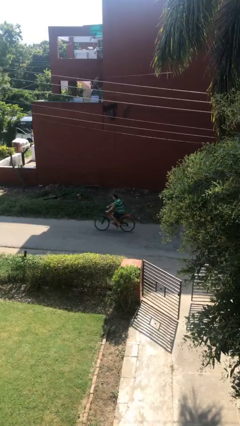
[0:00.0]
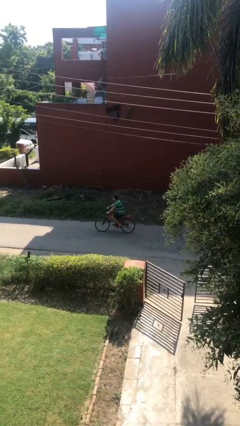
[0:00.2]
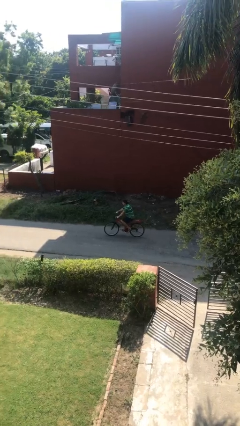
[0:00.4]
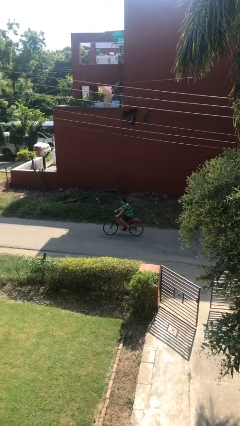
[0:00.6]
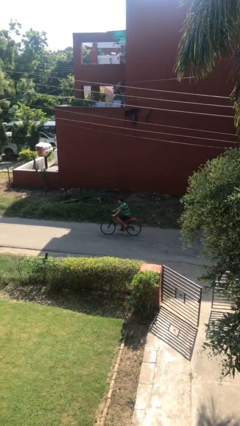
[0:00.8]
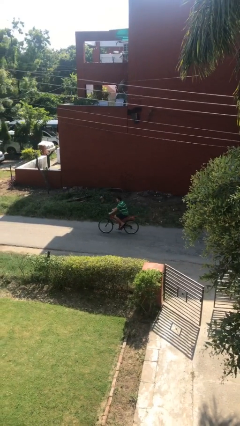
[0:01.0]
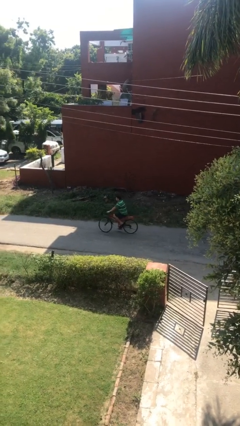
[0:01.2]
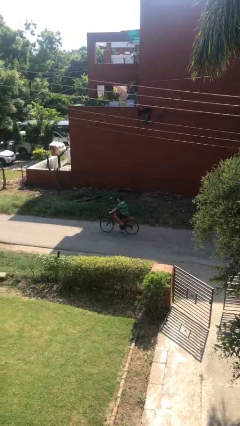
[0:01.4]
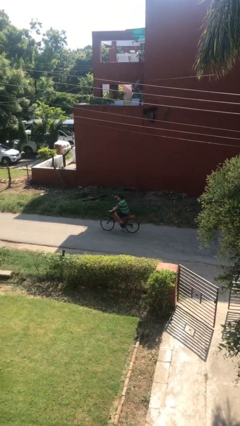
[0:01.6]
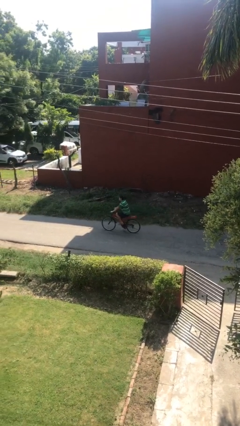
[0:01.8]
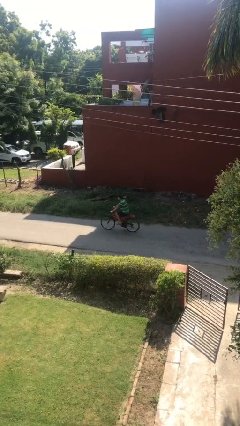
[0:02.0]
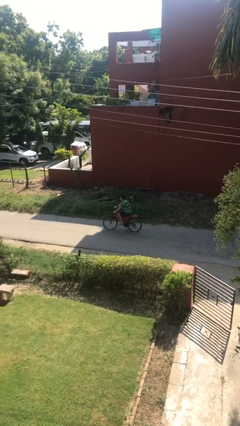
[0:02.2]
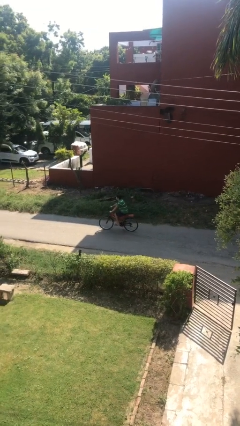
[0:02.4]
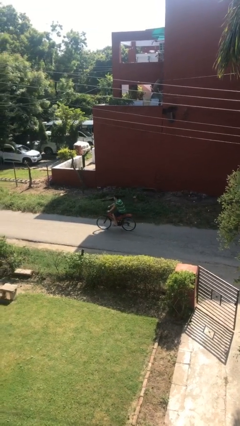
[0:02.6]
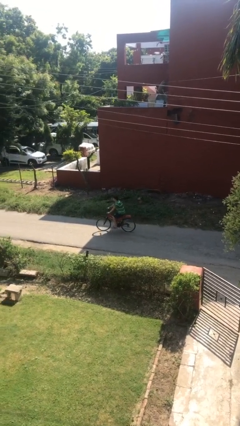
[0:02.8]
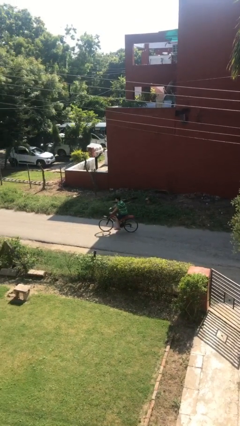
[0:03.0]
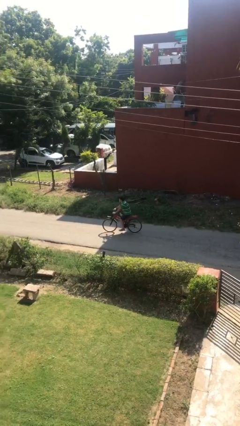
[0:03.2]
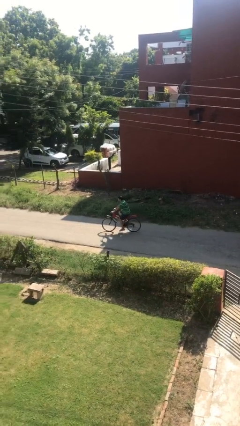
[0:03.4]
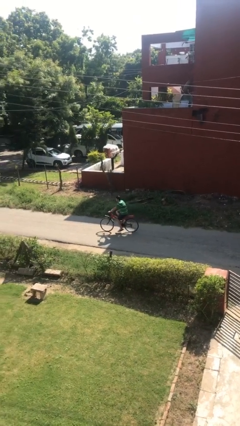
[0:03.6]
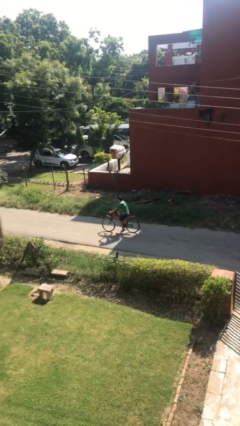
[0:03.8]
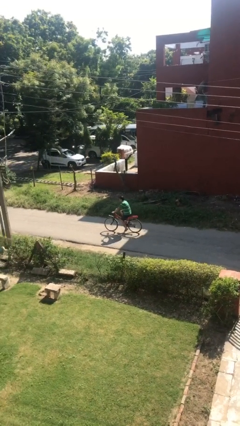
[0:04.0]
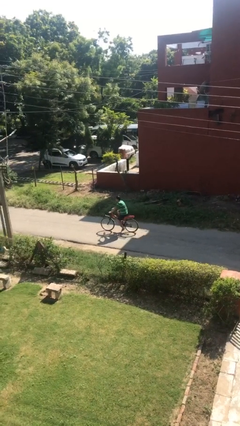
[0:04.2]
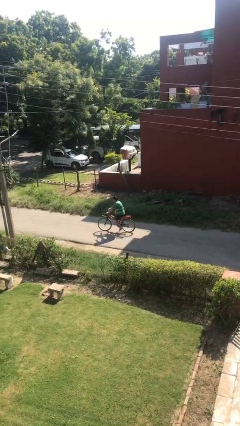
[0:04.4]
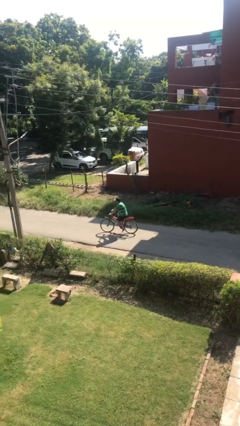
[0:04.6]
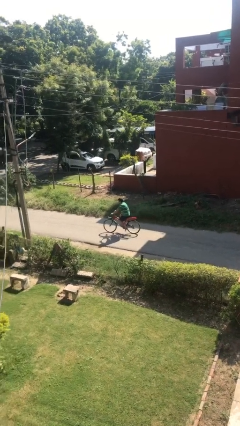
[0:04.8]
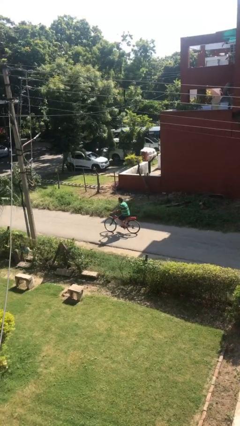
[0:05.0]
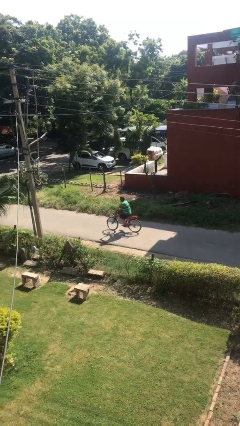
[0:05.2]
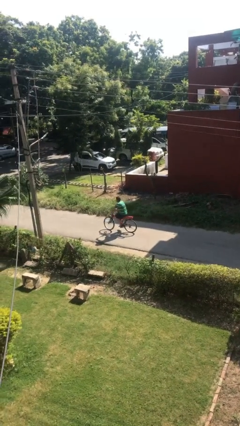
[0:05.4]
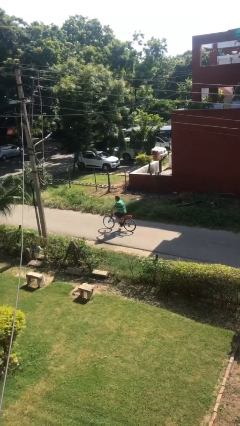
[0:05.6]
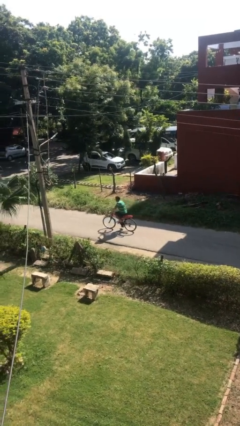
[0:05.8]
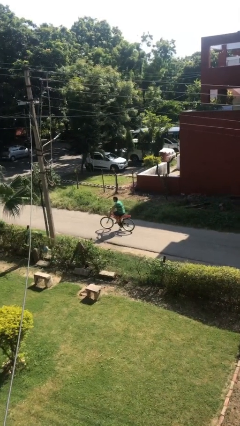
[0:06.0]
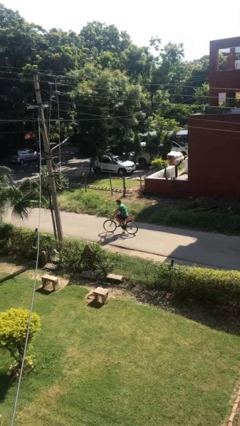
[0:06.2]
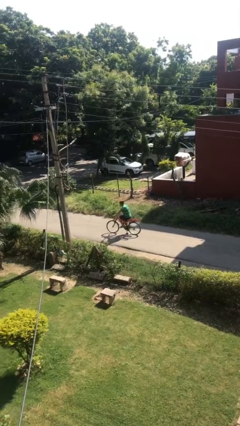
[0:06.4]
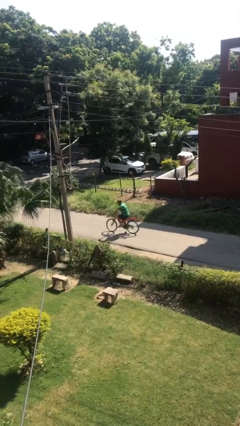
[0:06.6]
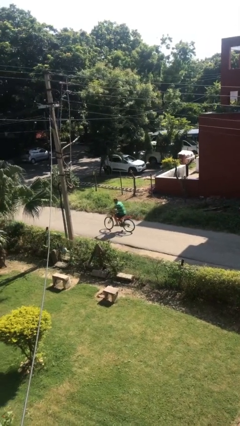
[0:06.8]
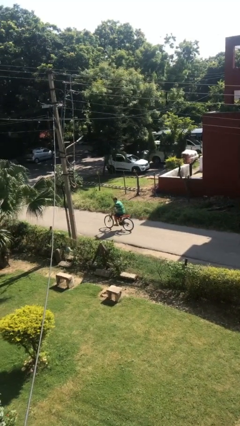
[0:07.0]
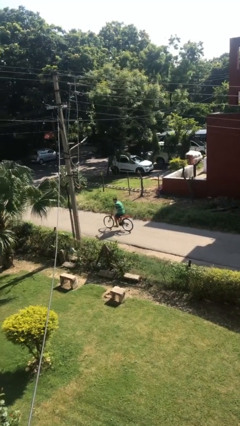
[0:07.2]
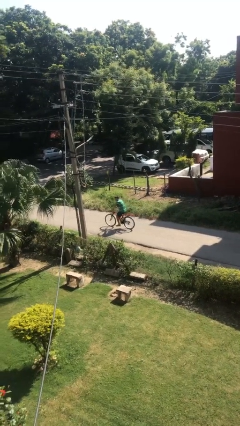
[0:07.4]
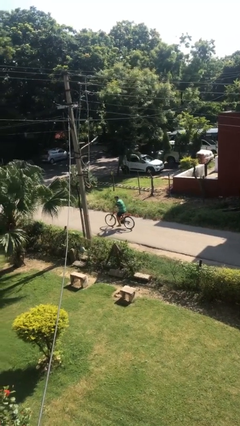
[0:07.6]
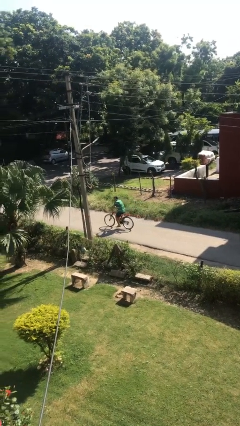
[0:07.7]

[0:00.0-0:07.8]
person rides bicycle

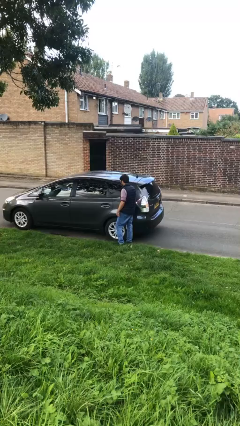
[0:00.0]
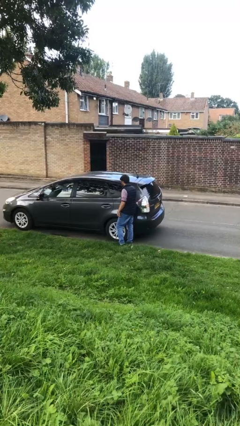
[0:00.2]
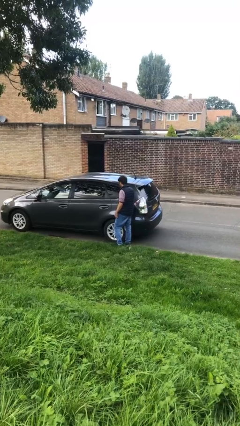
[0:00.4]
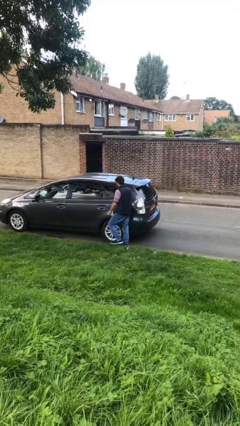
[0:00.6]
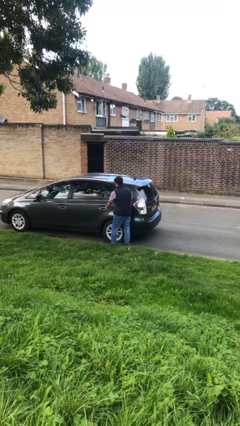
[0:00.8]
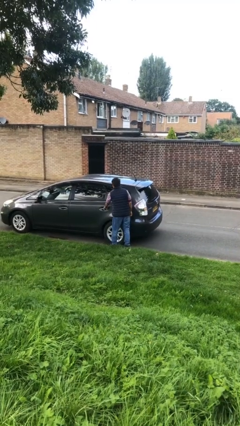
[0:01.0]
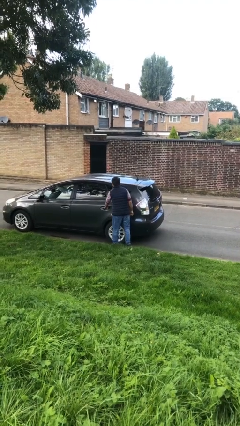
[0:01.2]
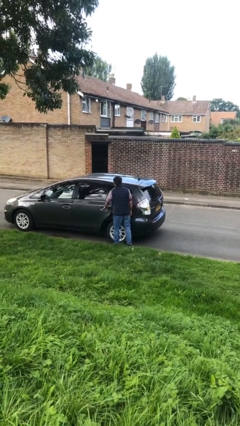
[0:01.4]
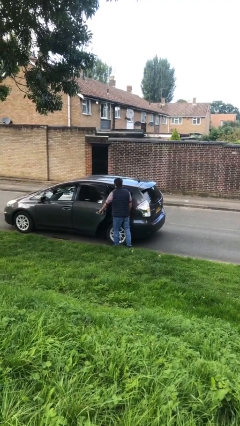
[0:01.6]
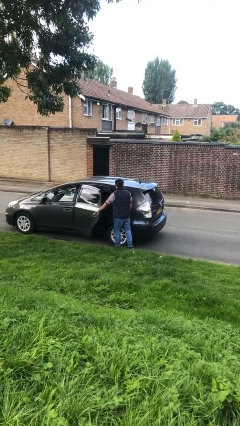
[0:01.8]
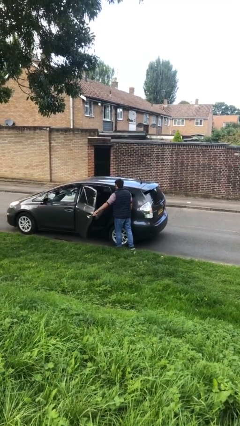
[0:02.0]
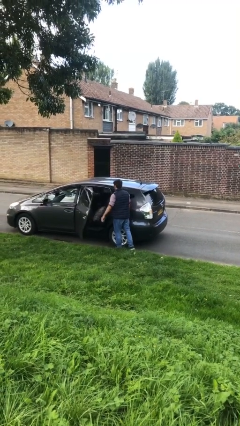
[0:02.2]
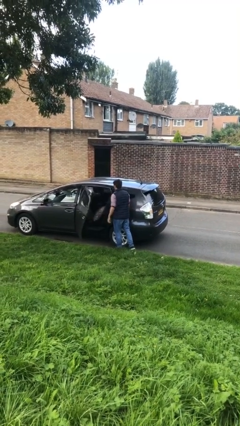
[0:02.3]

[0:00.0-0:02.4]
person opens car door

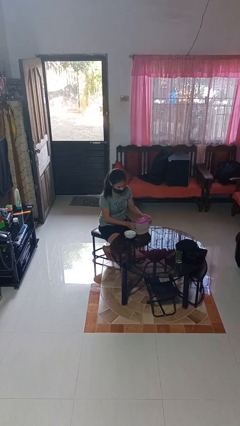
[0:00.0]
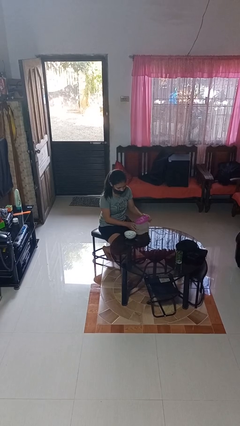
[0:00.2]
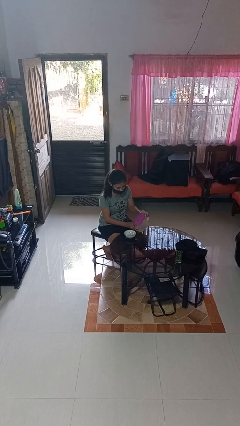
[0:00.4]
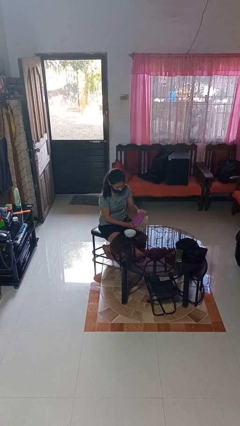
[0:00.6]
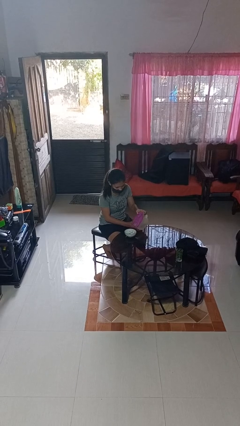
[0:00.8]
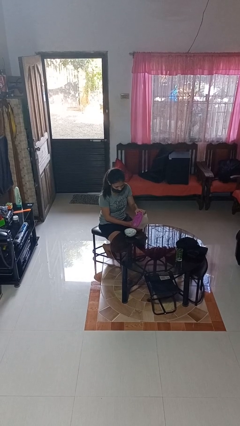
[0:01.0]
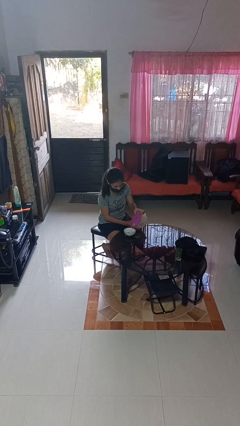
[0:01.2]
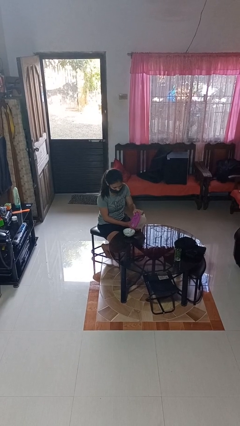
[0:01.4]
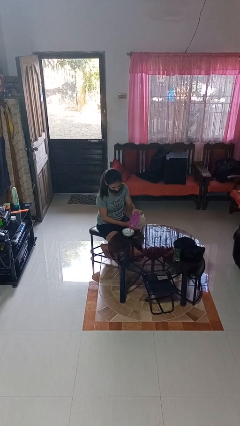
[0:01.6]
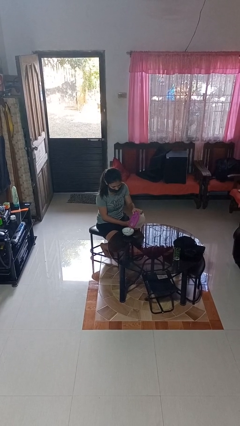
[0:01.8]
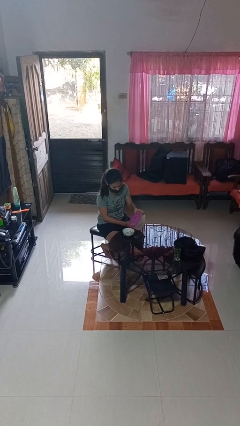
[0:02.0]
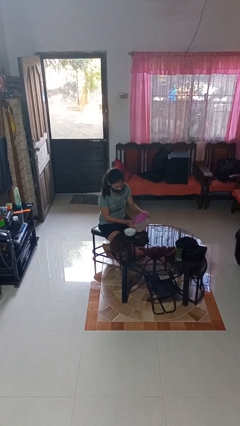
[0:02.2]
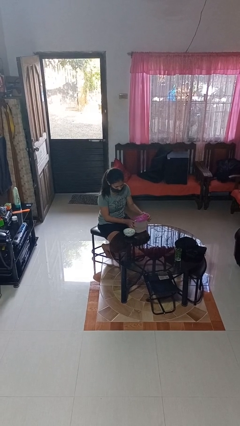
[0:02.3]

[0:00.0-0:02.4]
person pours into bowl

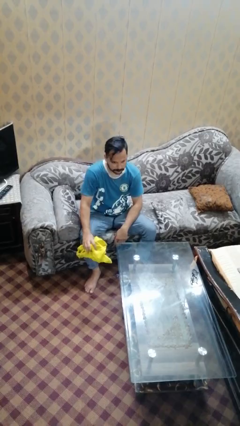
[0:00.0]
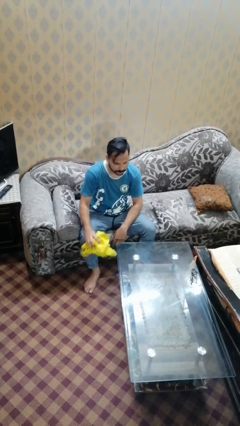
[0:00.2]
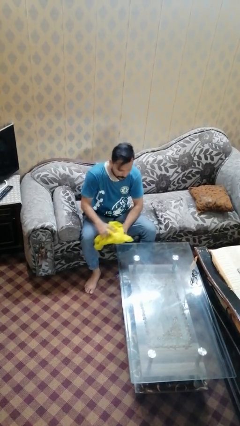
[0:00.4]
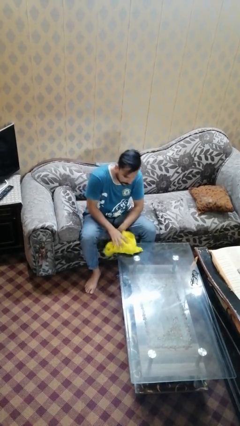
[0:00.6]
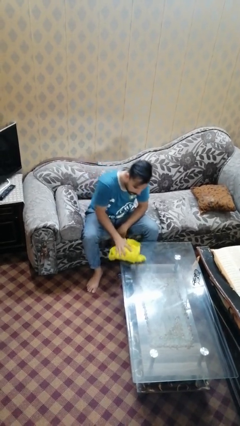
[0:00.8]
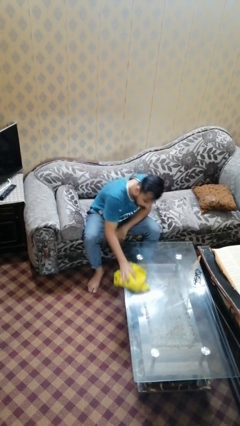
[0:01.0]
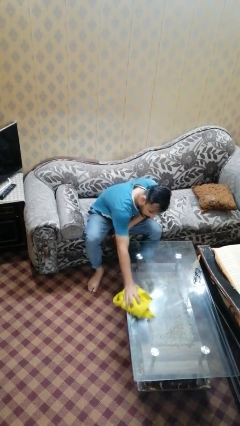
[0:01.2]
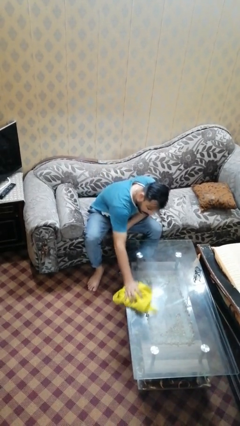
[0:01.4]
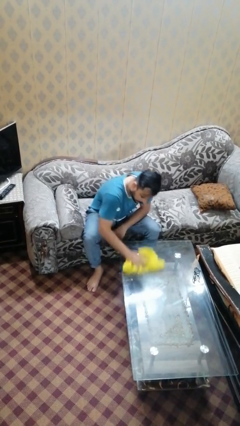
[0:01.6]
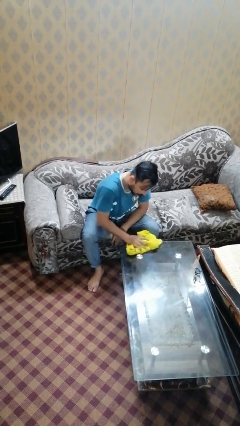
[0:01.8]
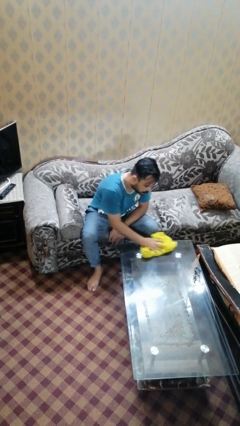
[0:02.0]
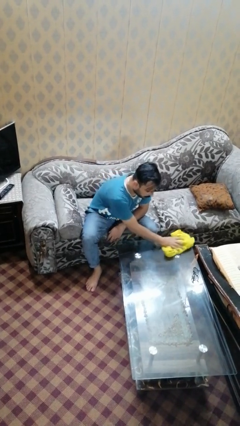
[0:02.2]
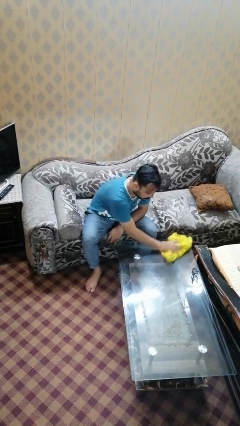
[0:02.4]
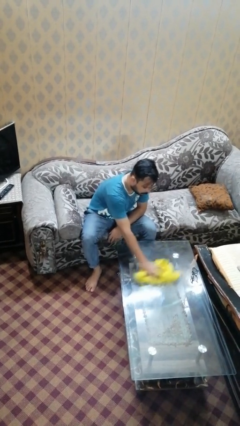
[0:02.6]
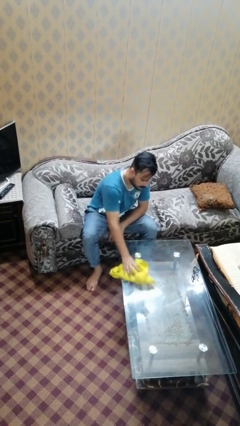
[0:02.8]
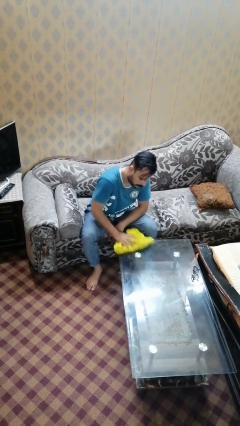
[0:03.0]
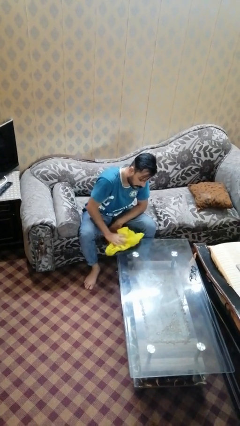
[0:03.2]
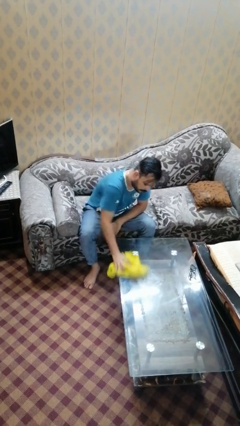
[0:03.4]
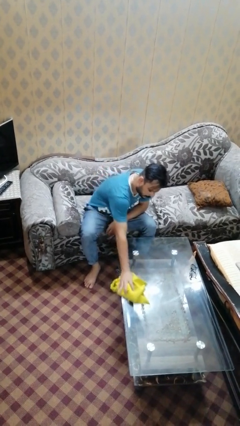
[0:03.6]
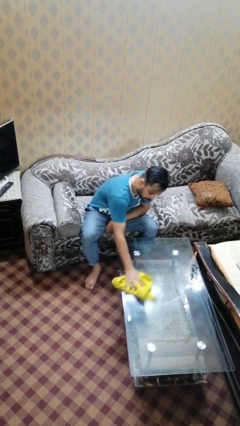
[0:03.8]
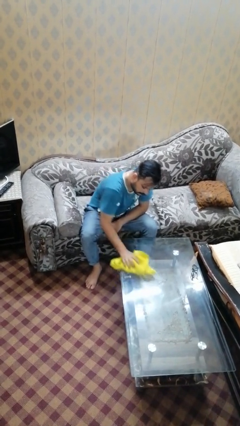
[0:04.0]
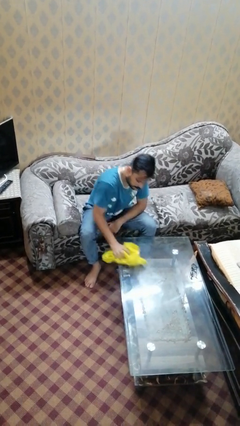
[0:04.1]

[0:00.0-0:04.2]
person cleans table with rag

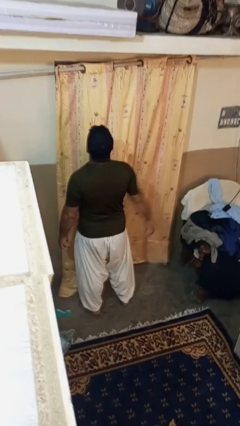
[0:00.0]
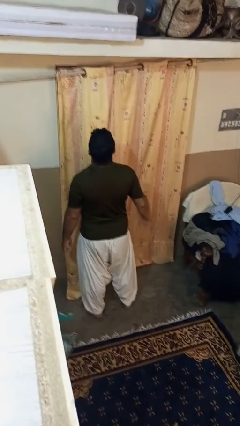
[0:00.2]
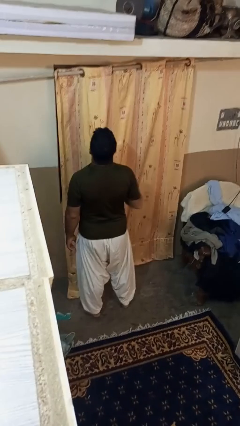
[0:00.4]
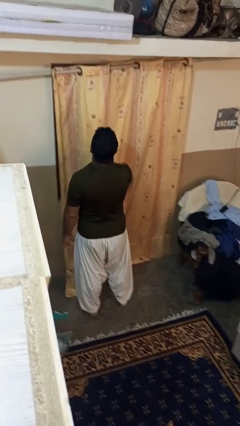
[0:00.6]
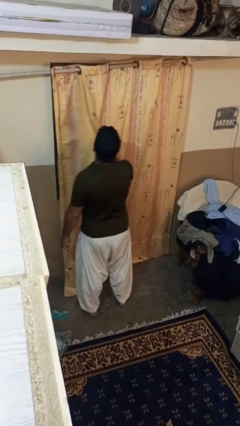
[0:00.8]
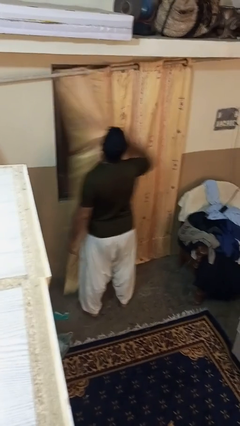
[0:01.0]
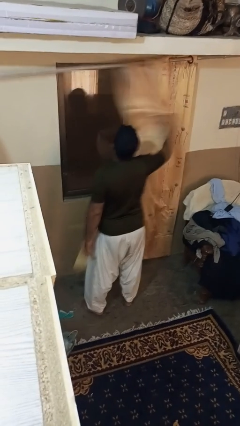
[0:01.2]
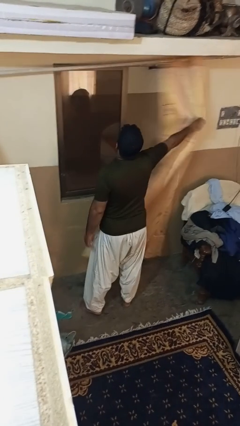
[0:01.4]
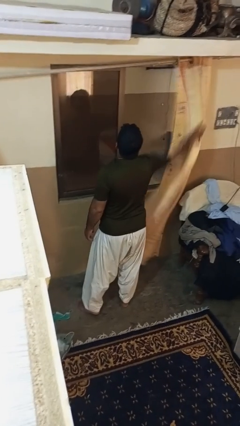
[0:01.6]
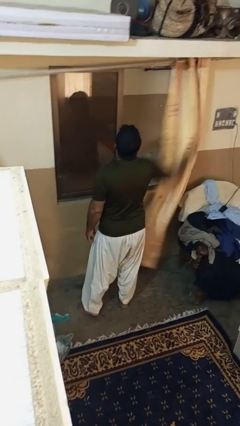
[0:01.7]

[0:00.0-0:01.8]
person opens curtains
